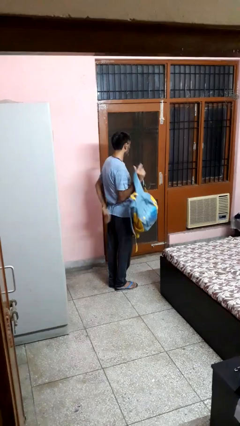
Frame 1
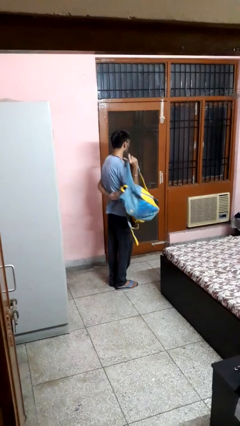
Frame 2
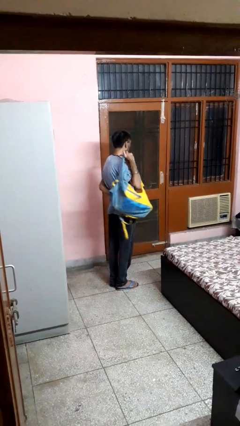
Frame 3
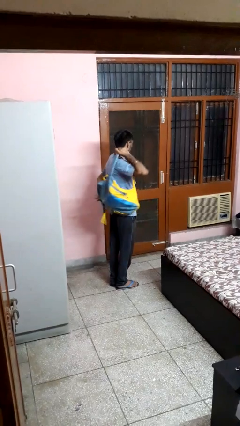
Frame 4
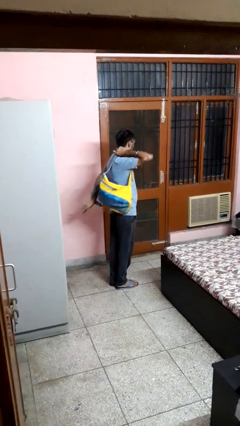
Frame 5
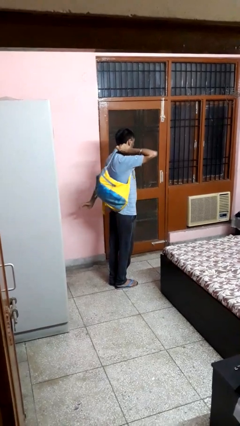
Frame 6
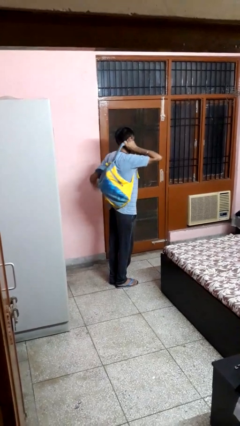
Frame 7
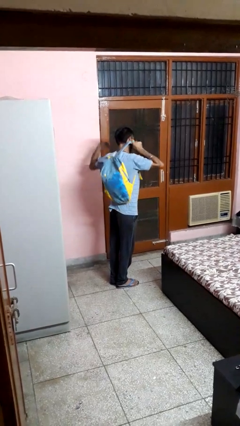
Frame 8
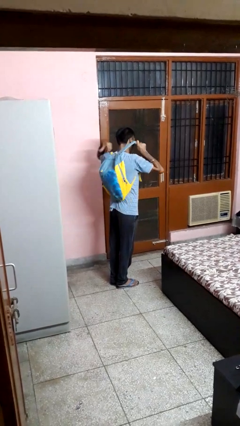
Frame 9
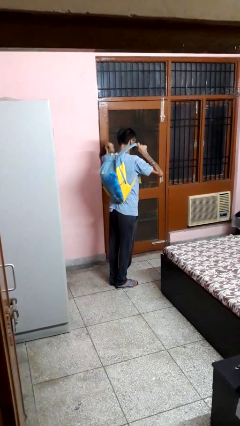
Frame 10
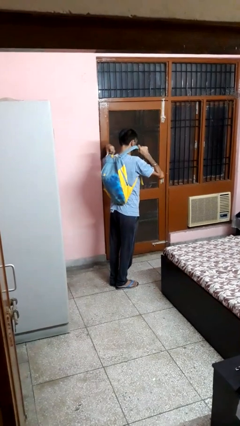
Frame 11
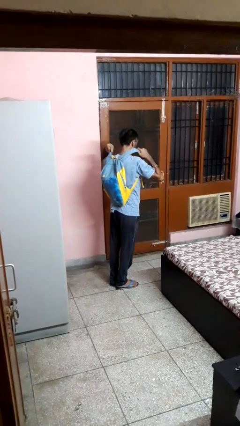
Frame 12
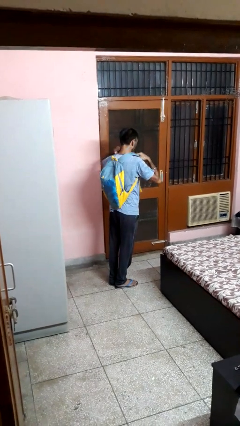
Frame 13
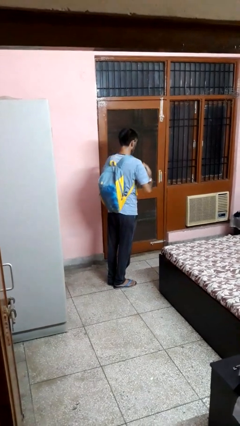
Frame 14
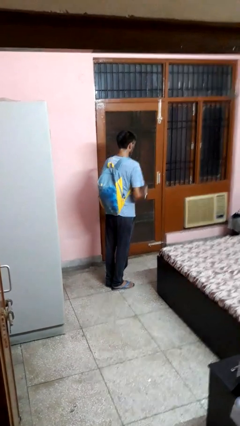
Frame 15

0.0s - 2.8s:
person puts on backpack

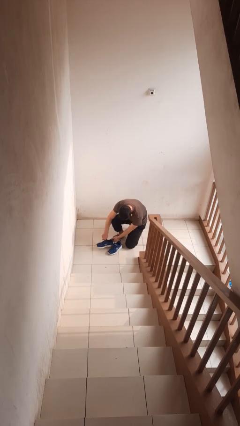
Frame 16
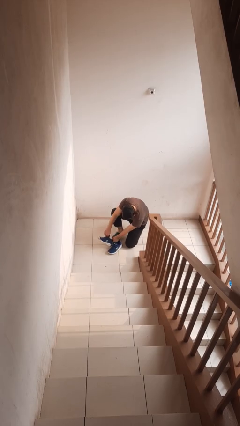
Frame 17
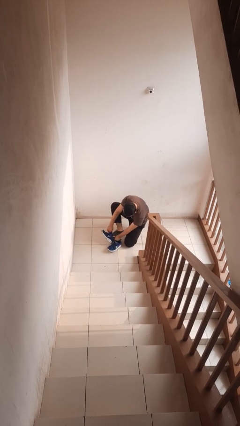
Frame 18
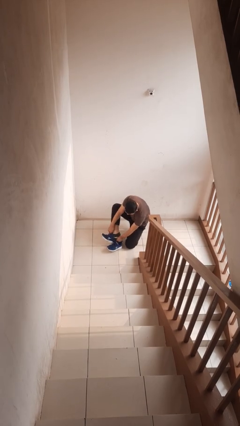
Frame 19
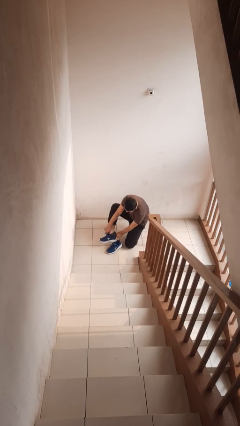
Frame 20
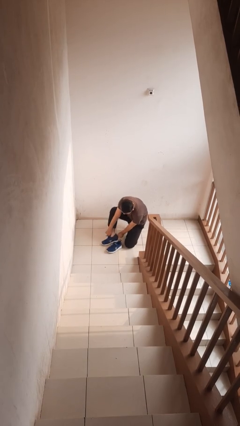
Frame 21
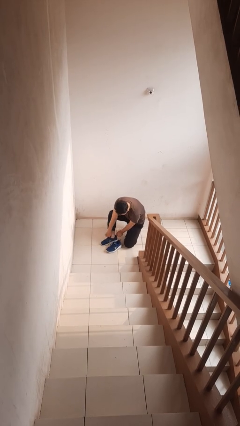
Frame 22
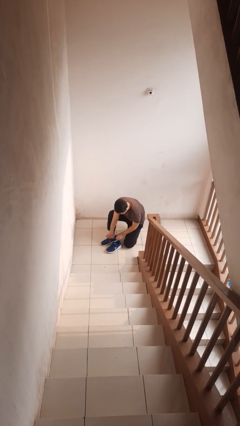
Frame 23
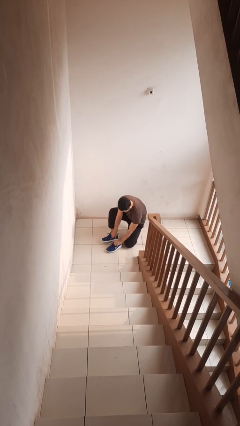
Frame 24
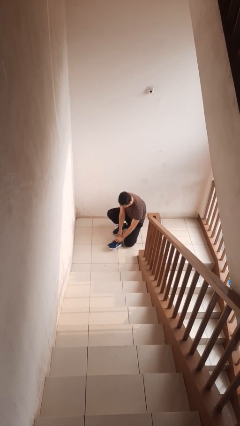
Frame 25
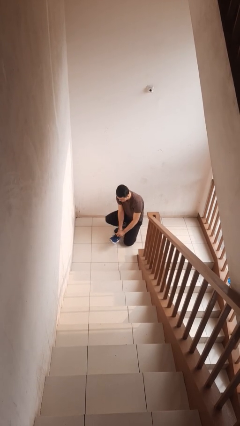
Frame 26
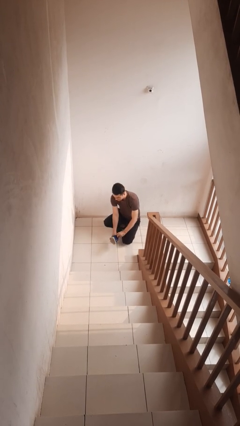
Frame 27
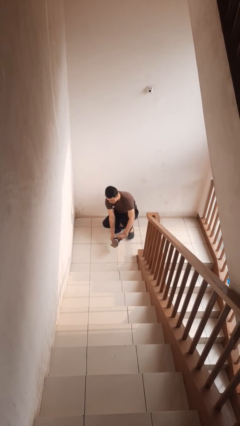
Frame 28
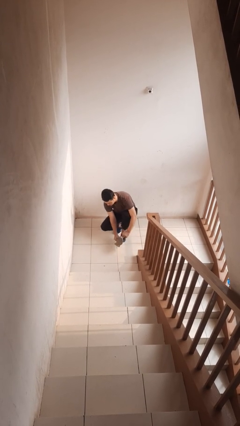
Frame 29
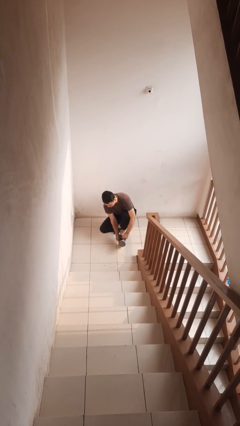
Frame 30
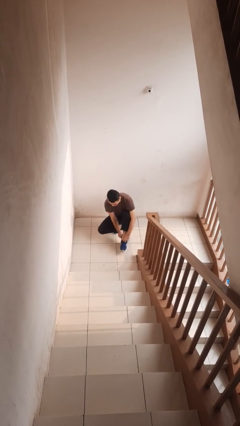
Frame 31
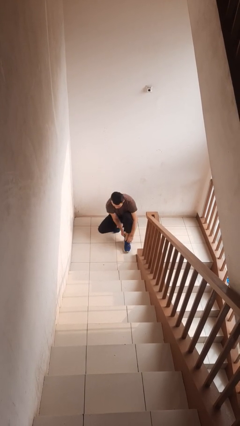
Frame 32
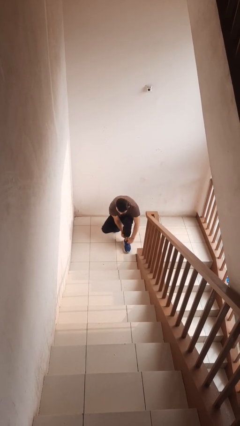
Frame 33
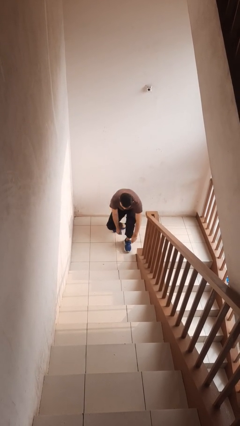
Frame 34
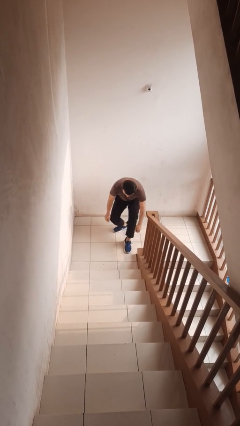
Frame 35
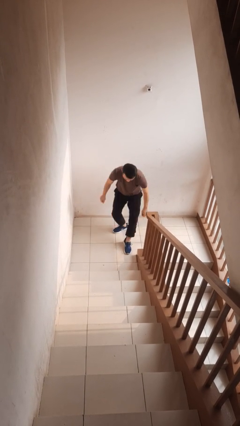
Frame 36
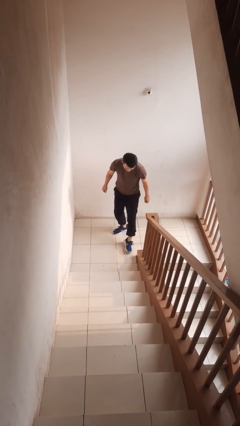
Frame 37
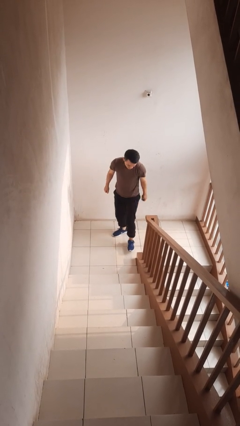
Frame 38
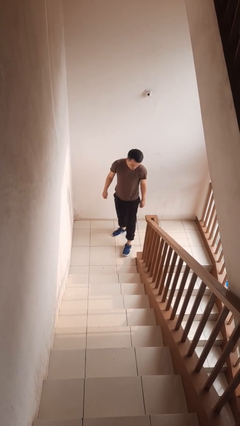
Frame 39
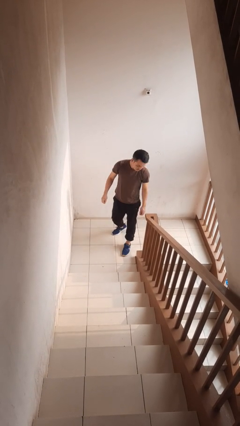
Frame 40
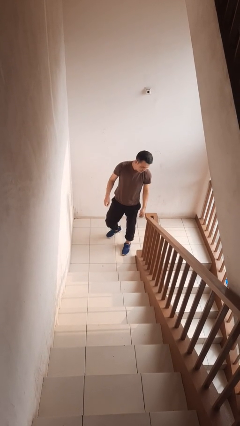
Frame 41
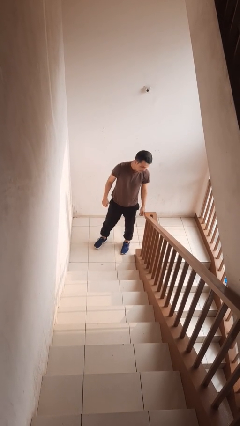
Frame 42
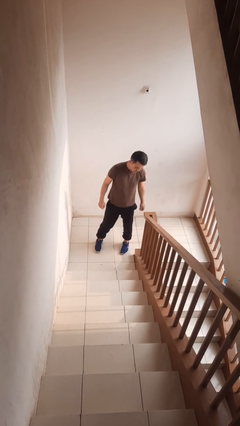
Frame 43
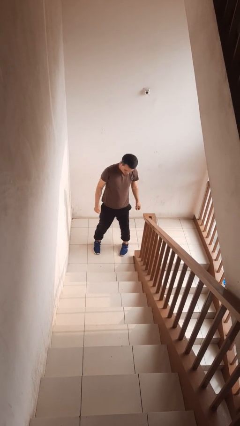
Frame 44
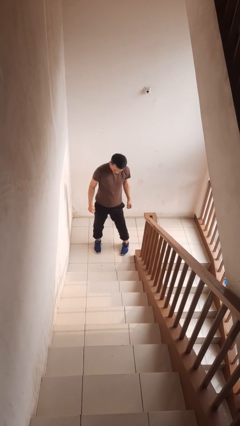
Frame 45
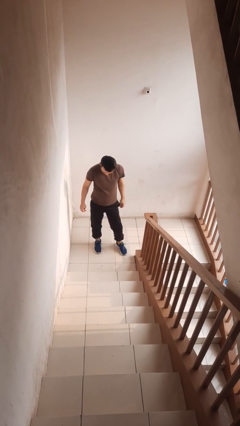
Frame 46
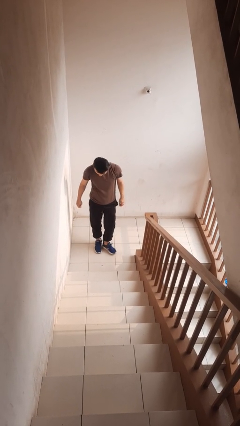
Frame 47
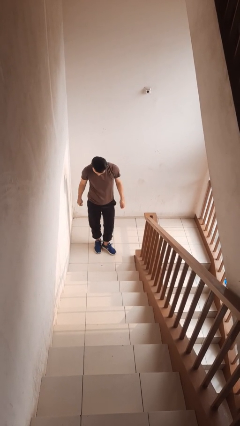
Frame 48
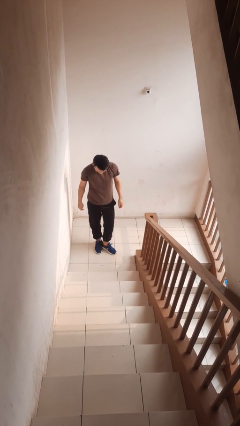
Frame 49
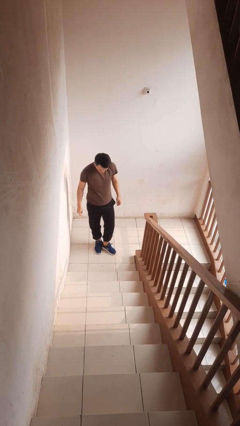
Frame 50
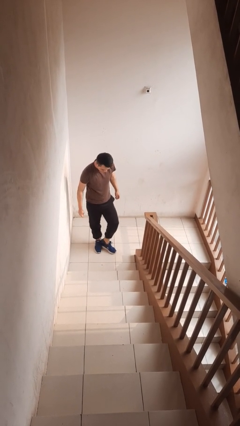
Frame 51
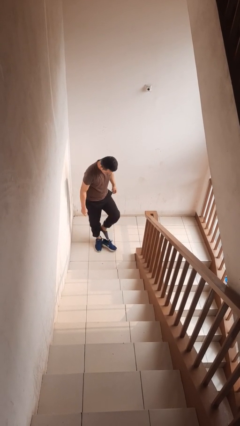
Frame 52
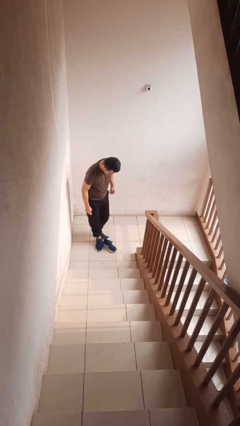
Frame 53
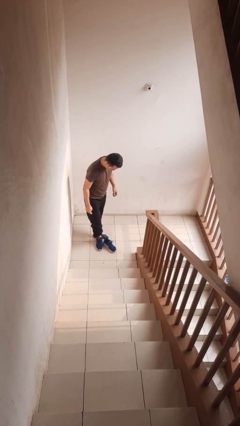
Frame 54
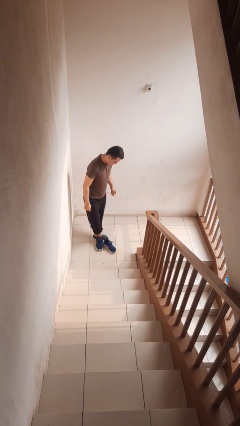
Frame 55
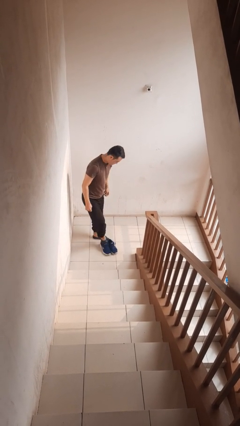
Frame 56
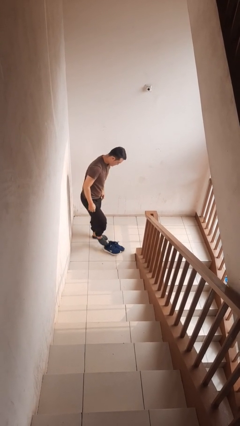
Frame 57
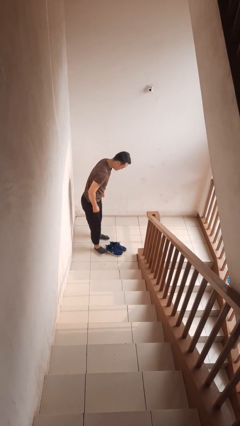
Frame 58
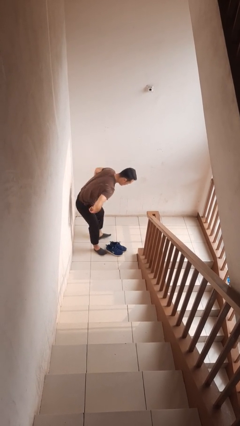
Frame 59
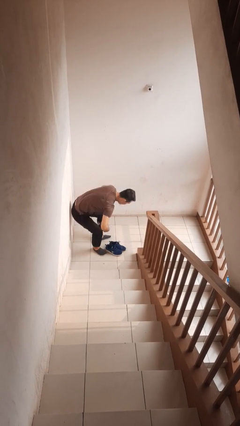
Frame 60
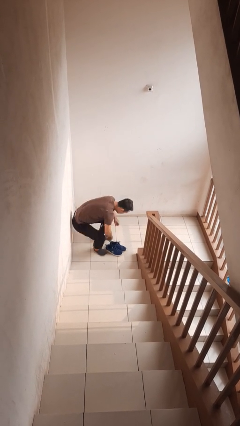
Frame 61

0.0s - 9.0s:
person puts on shoes

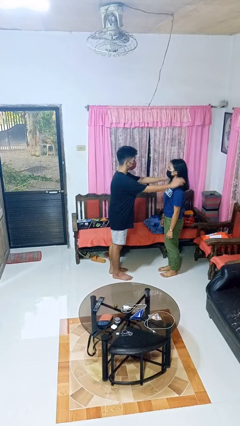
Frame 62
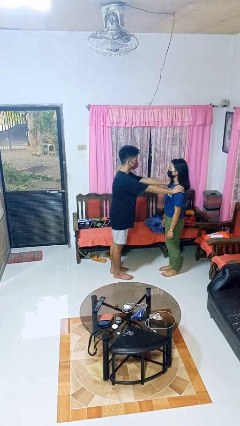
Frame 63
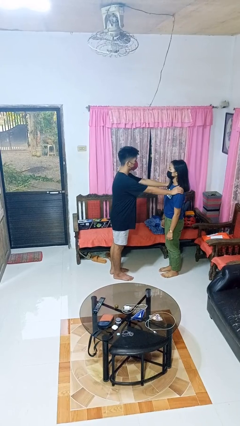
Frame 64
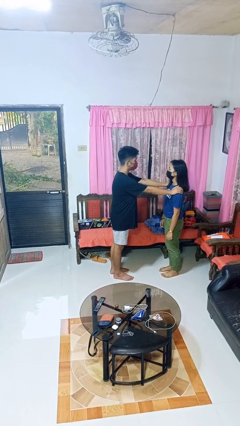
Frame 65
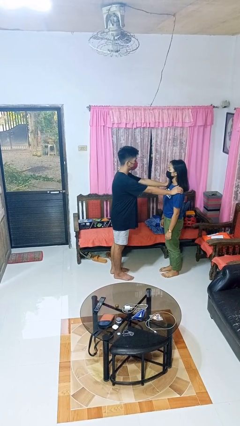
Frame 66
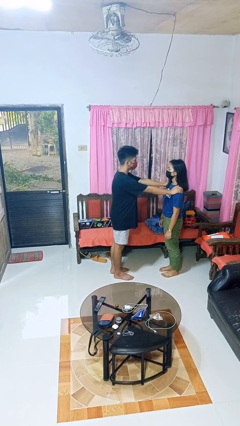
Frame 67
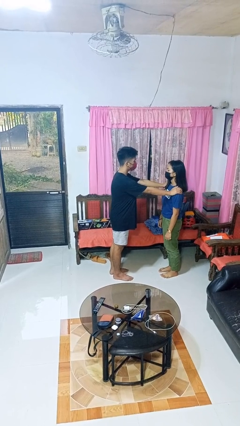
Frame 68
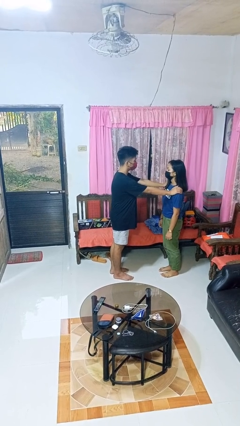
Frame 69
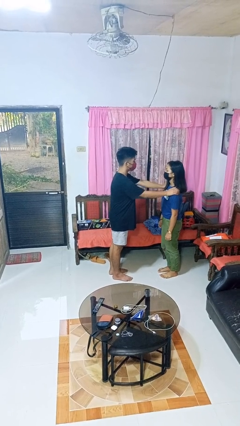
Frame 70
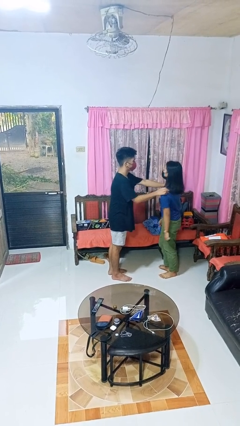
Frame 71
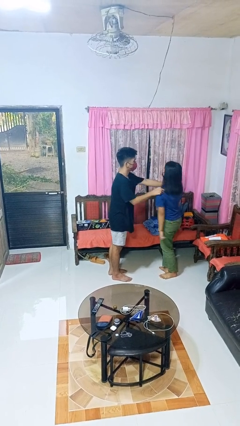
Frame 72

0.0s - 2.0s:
person grabs person by shoulder

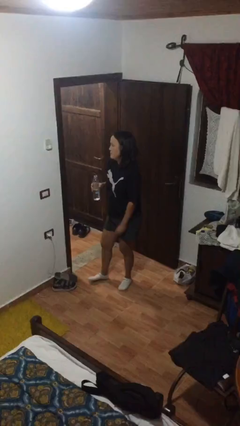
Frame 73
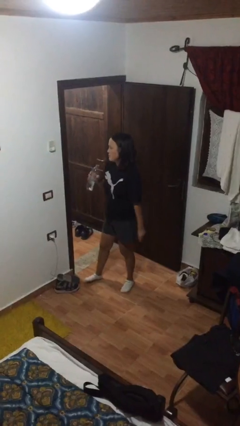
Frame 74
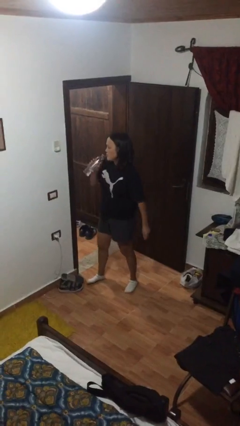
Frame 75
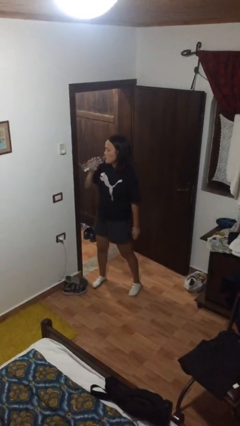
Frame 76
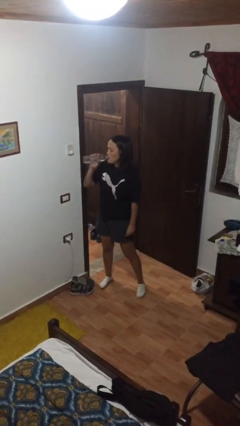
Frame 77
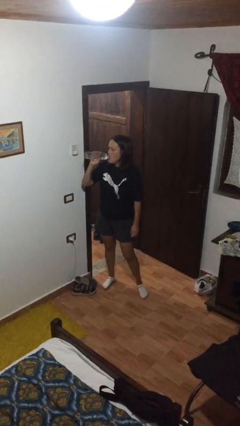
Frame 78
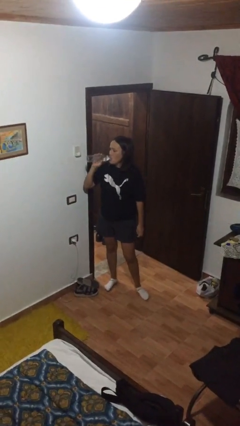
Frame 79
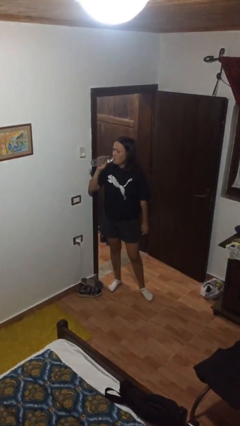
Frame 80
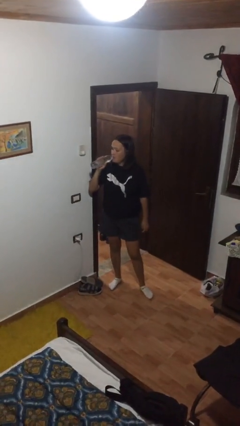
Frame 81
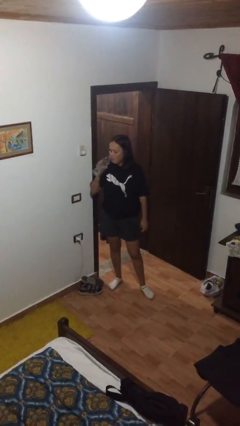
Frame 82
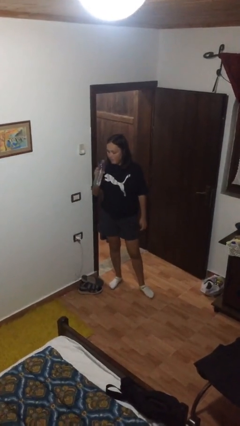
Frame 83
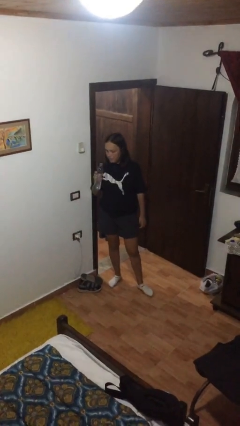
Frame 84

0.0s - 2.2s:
person drinks from bottle

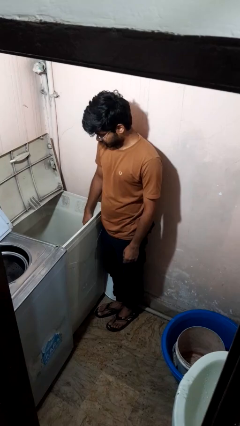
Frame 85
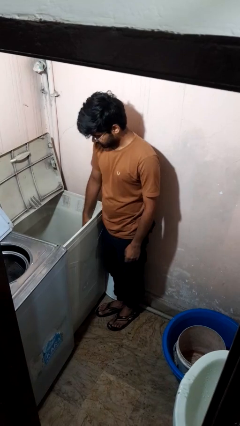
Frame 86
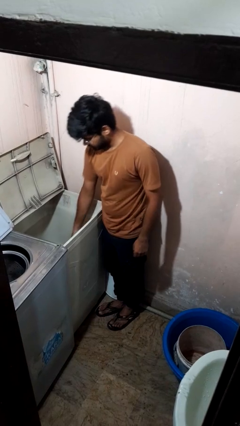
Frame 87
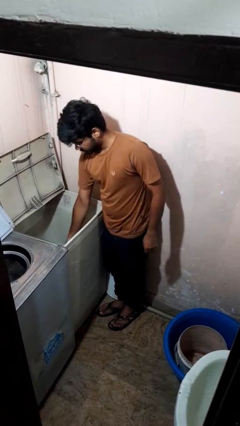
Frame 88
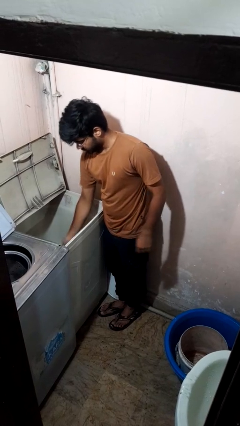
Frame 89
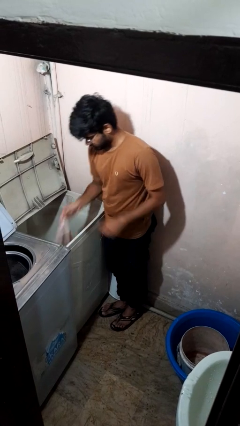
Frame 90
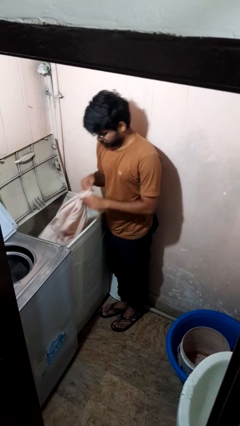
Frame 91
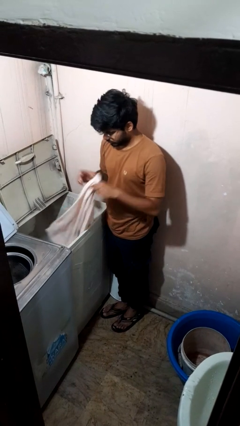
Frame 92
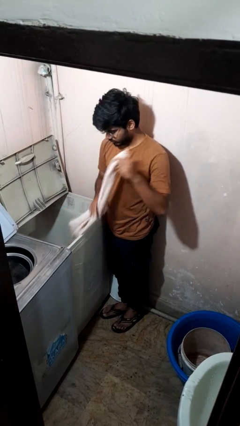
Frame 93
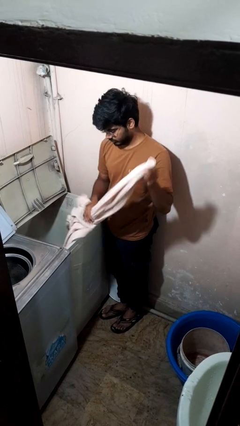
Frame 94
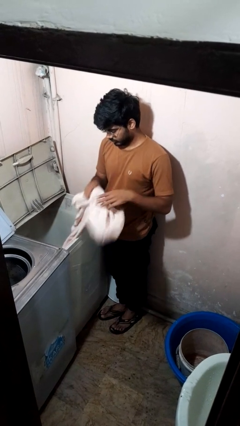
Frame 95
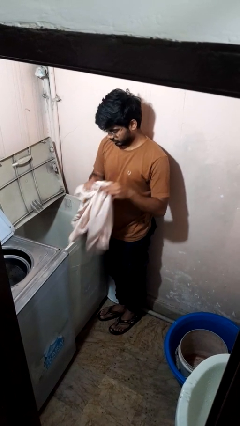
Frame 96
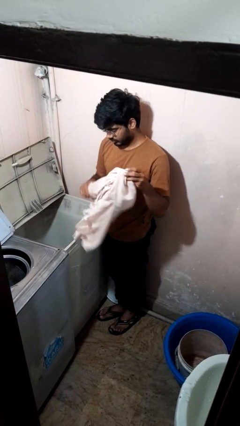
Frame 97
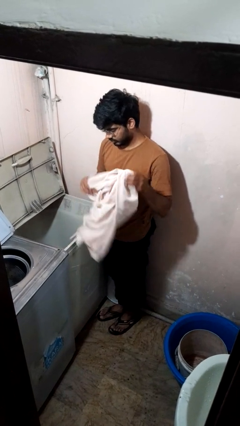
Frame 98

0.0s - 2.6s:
person unloads clotheswasher
